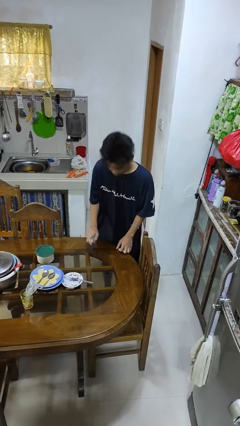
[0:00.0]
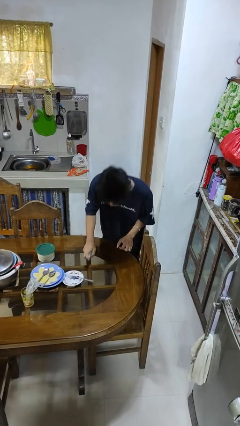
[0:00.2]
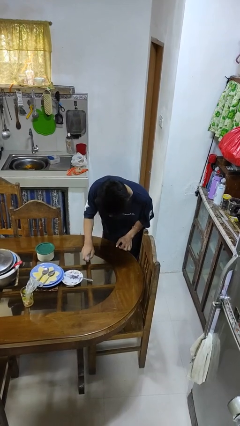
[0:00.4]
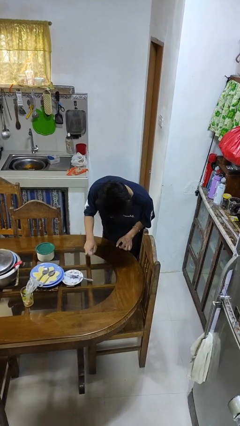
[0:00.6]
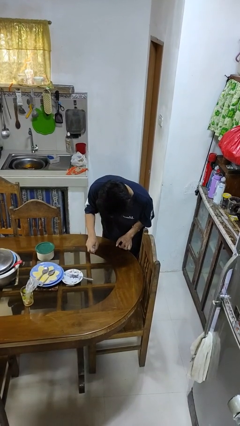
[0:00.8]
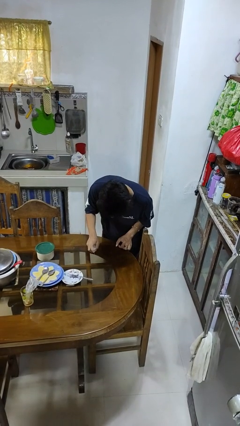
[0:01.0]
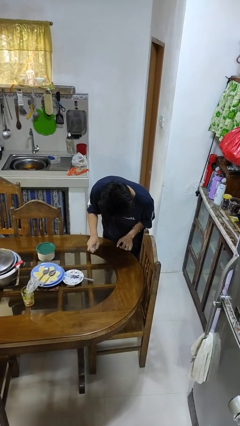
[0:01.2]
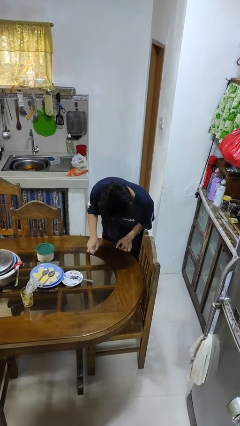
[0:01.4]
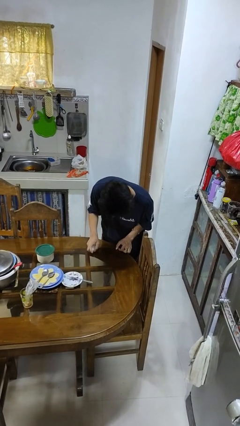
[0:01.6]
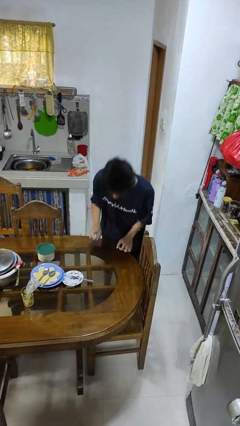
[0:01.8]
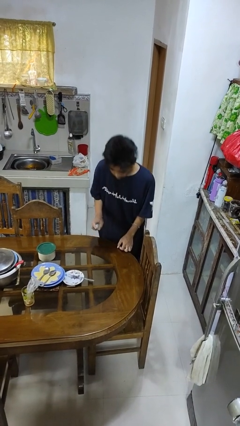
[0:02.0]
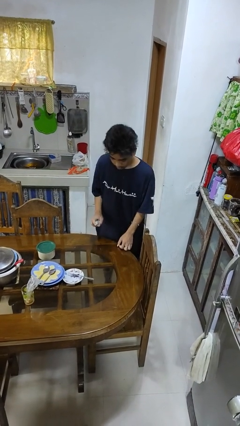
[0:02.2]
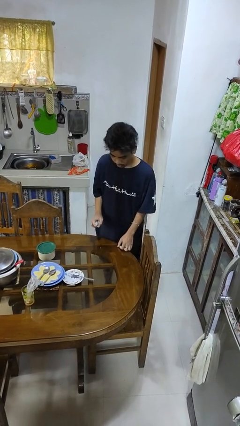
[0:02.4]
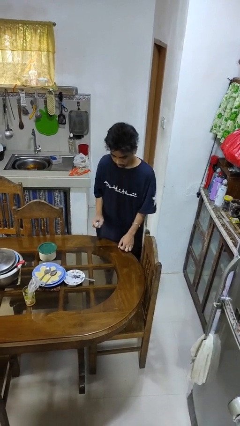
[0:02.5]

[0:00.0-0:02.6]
person sprays from bottle

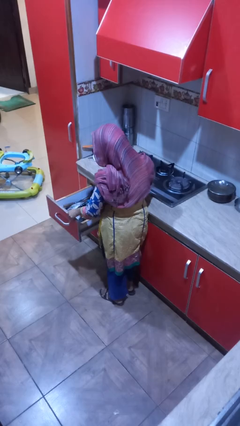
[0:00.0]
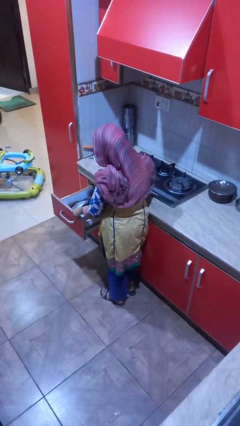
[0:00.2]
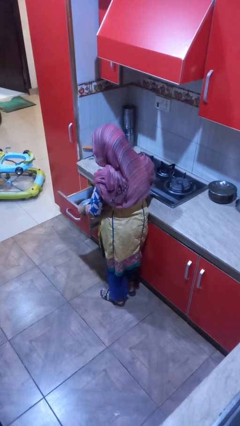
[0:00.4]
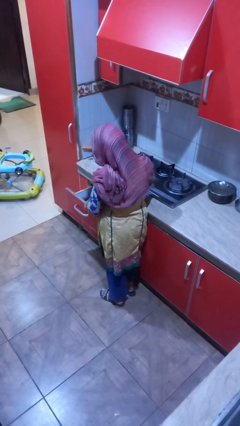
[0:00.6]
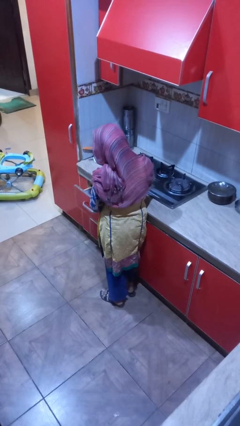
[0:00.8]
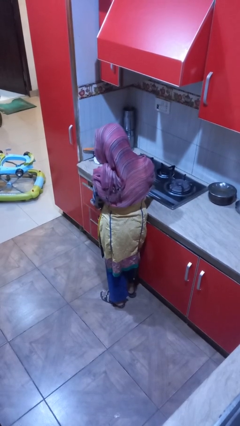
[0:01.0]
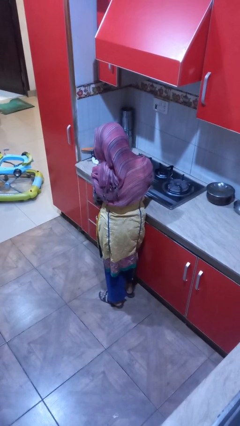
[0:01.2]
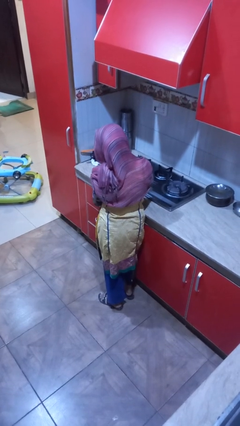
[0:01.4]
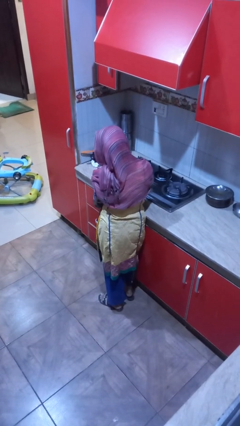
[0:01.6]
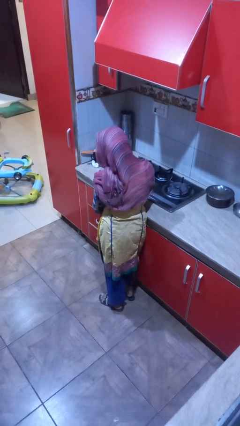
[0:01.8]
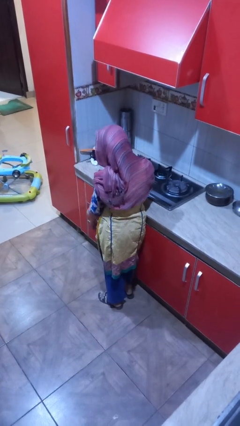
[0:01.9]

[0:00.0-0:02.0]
person closes kitchen drawer

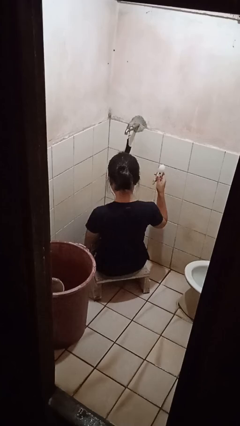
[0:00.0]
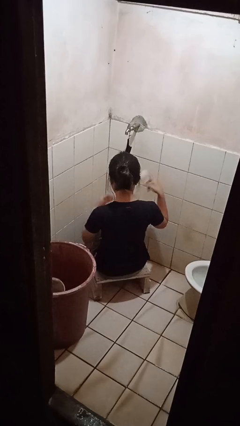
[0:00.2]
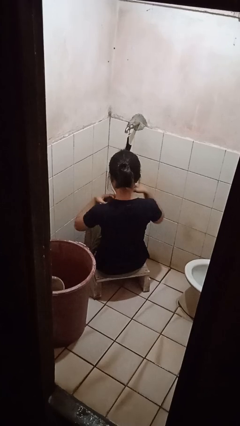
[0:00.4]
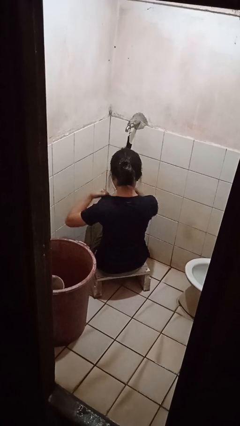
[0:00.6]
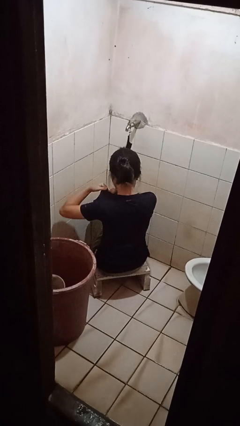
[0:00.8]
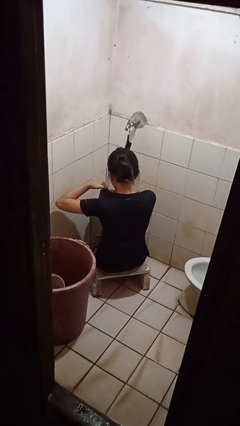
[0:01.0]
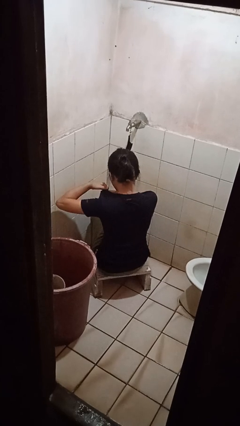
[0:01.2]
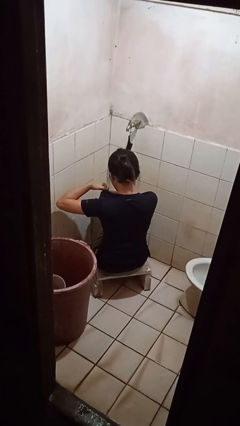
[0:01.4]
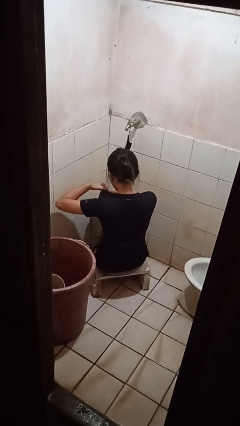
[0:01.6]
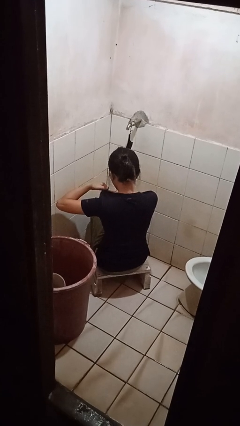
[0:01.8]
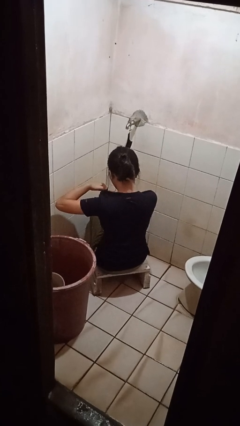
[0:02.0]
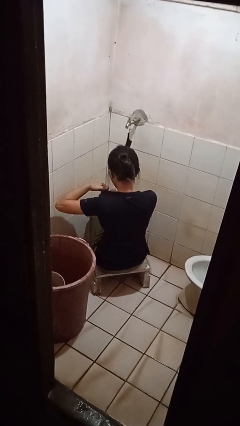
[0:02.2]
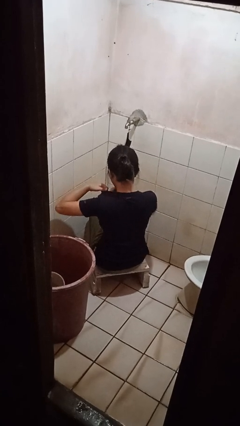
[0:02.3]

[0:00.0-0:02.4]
person applies deodorant

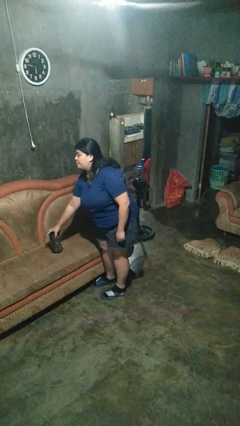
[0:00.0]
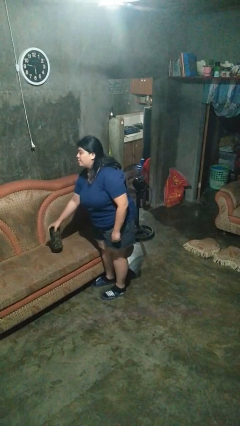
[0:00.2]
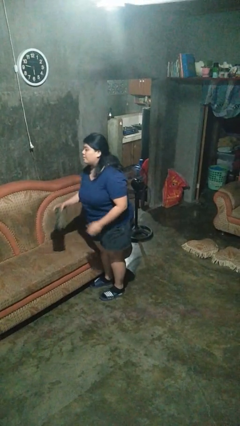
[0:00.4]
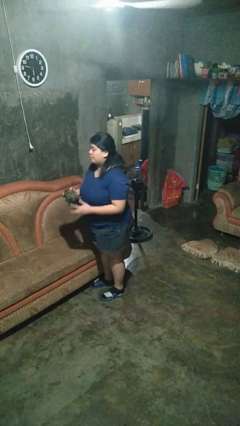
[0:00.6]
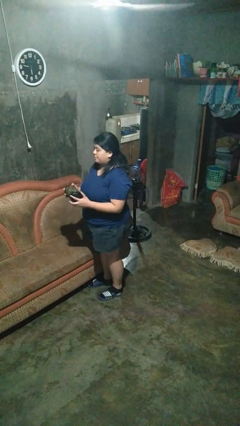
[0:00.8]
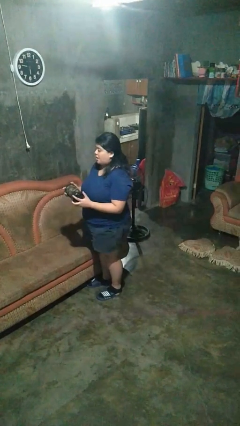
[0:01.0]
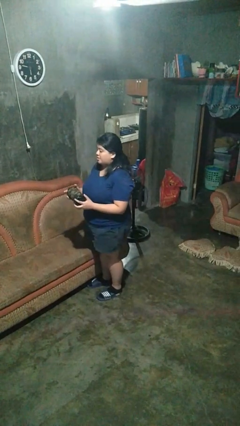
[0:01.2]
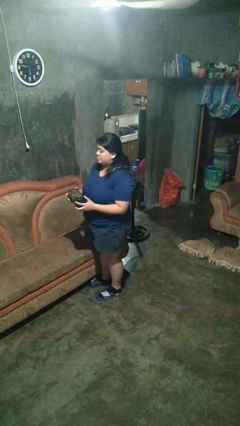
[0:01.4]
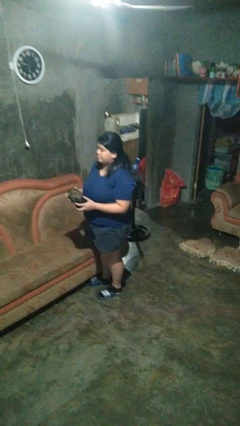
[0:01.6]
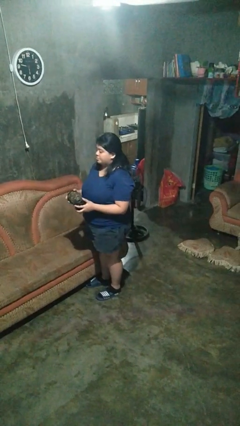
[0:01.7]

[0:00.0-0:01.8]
person picks up object from couch

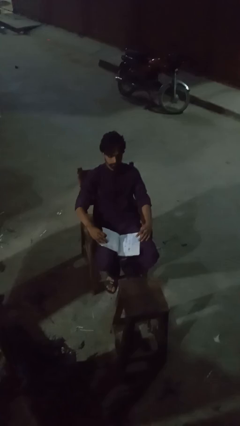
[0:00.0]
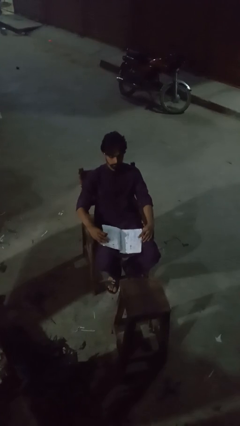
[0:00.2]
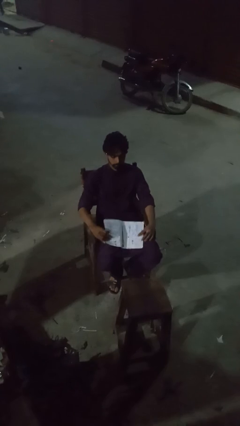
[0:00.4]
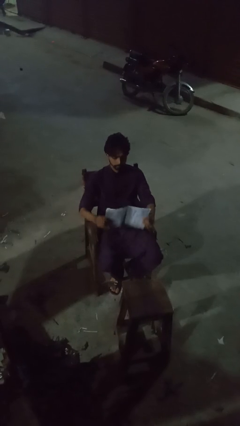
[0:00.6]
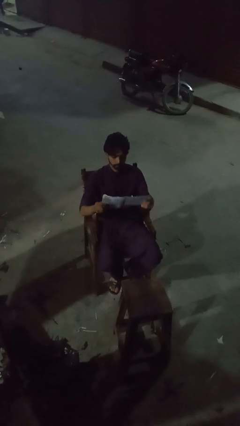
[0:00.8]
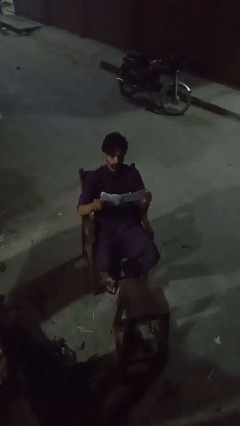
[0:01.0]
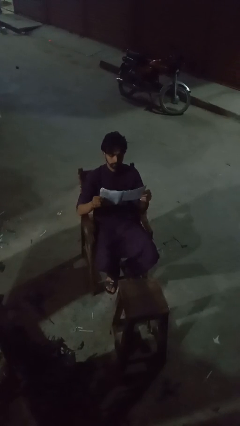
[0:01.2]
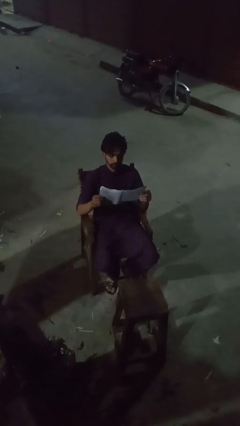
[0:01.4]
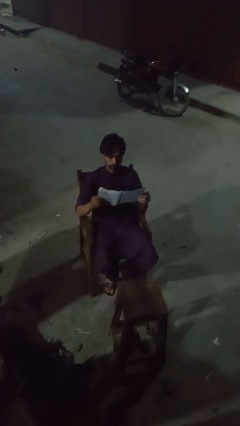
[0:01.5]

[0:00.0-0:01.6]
person reads magazine

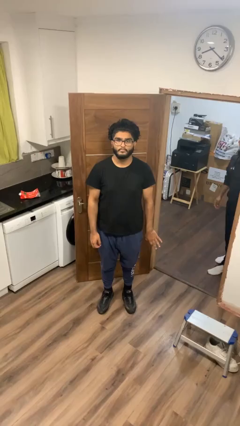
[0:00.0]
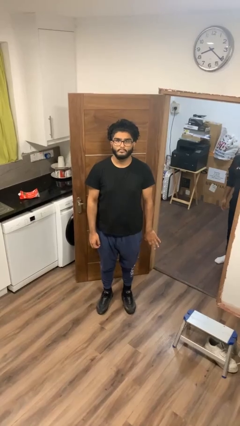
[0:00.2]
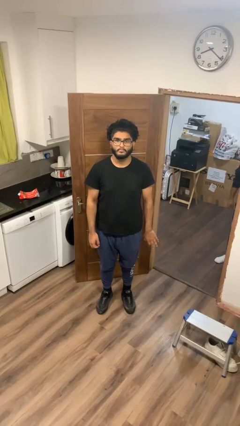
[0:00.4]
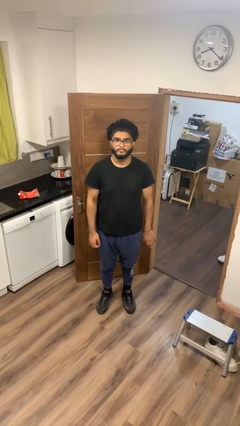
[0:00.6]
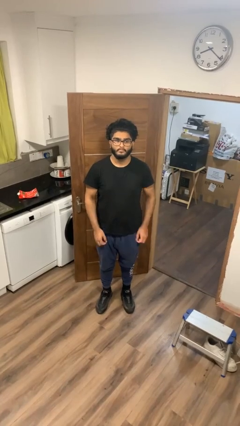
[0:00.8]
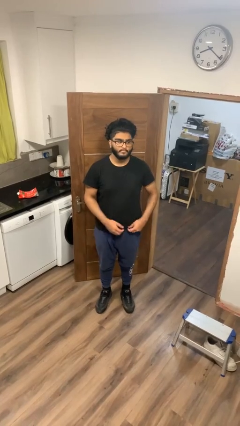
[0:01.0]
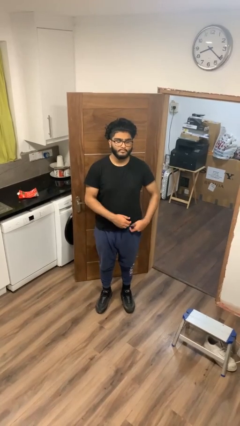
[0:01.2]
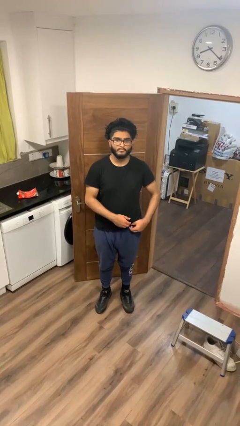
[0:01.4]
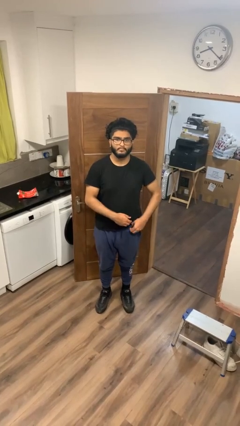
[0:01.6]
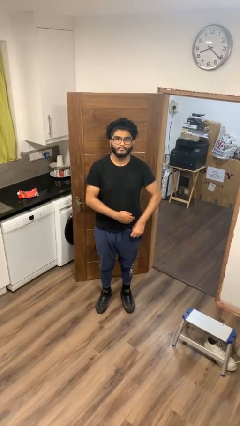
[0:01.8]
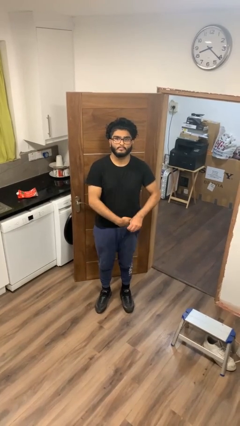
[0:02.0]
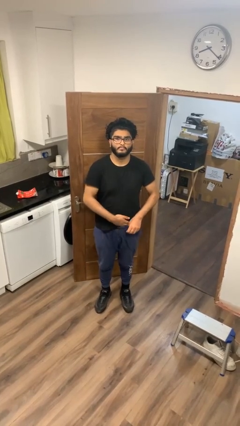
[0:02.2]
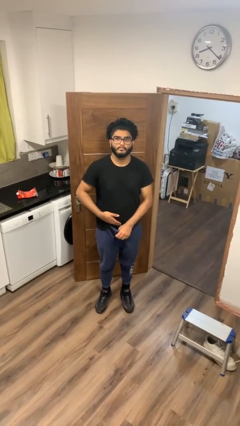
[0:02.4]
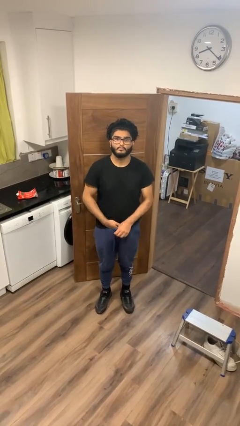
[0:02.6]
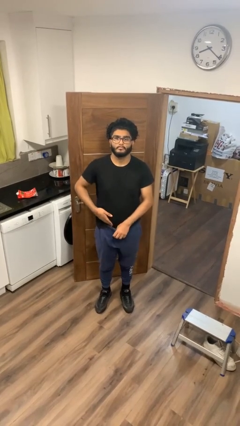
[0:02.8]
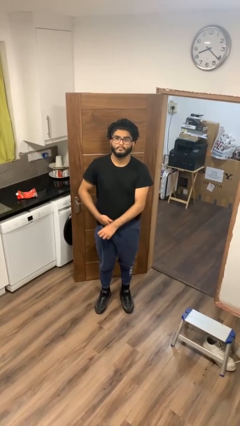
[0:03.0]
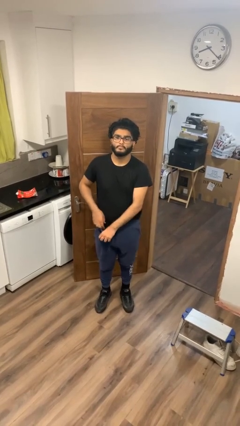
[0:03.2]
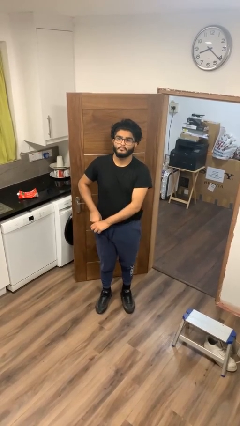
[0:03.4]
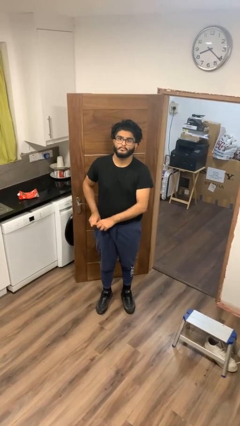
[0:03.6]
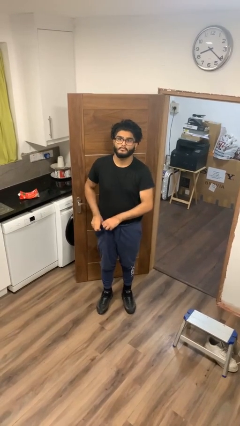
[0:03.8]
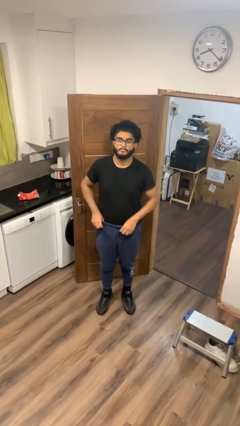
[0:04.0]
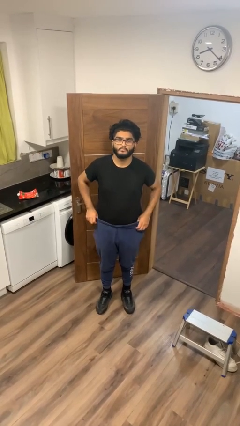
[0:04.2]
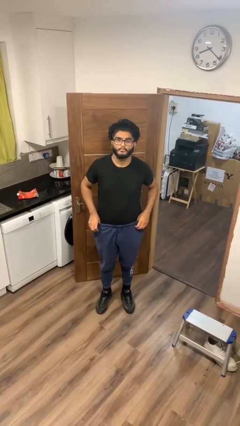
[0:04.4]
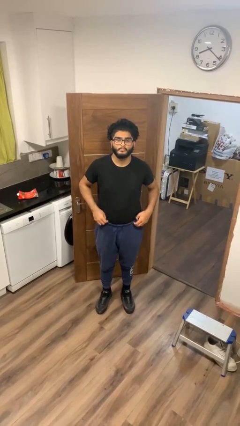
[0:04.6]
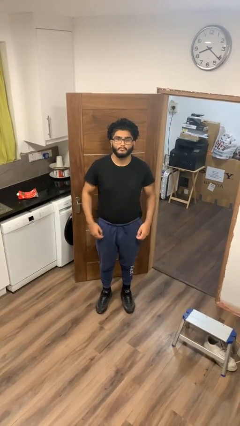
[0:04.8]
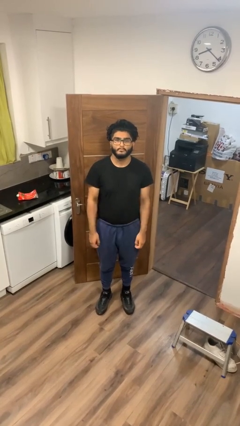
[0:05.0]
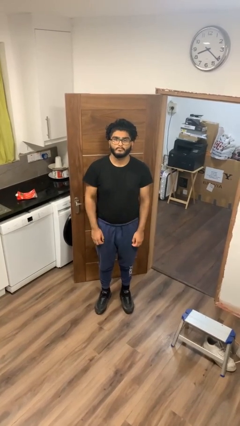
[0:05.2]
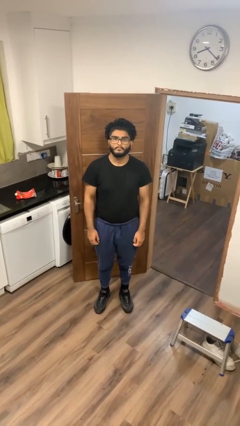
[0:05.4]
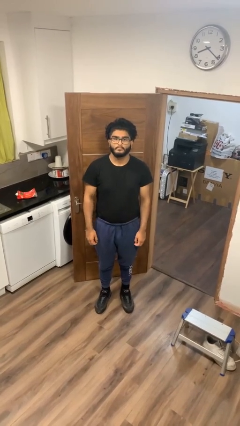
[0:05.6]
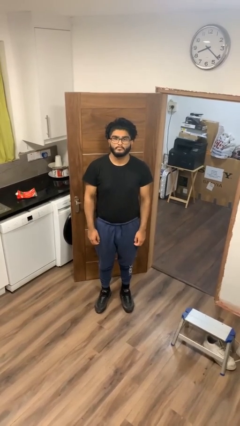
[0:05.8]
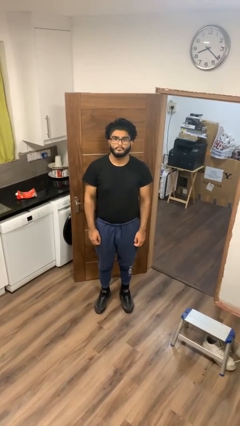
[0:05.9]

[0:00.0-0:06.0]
person tucks in shirt

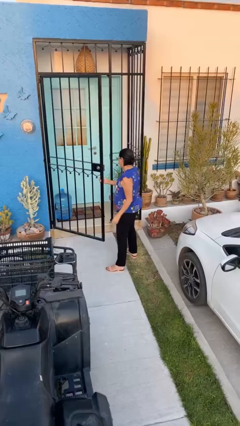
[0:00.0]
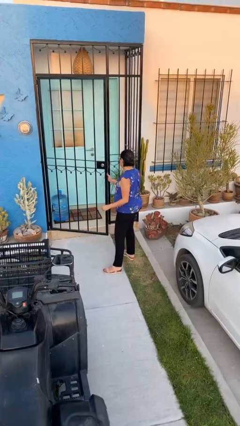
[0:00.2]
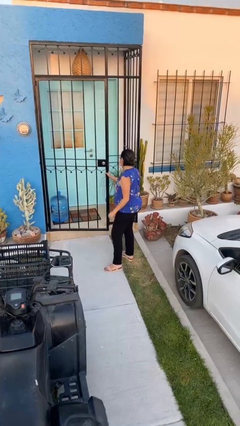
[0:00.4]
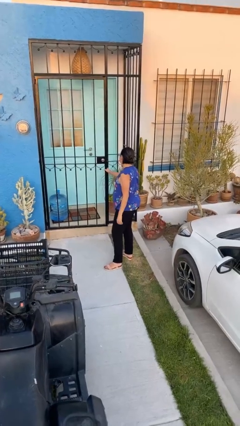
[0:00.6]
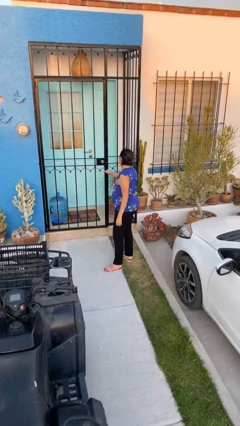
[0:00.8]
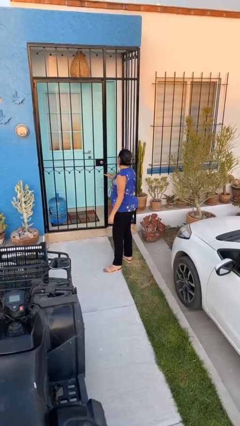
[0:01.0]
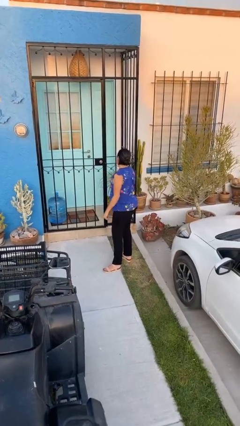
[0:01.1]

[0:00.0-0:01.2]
person closes facility door
